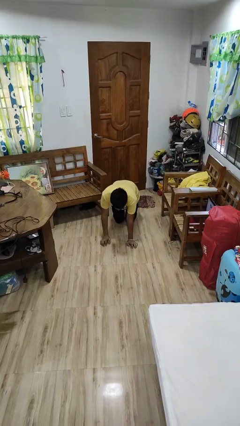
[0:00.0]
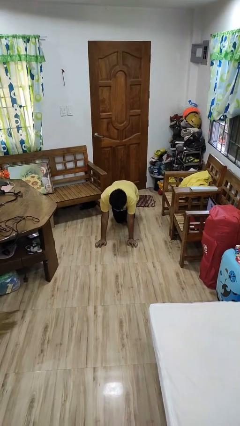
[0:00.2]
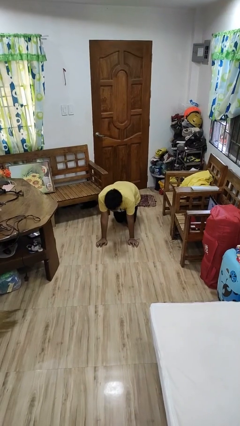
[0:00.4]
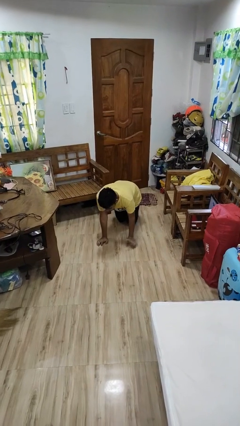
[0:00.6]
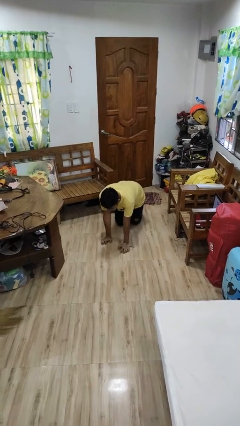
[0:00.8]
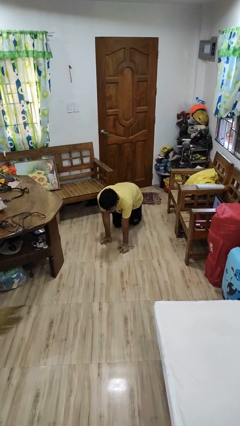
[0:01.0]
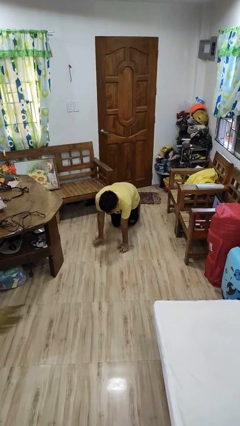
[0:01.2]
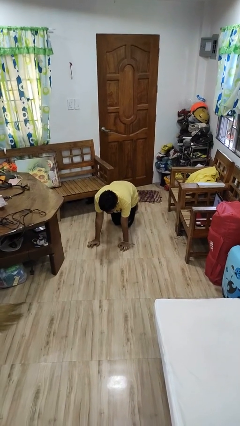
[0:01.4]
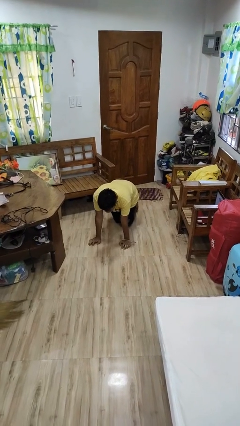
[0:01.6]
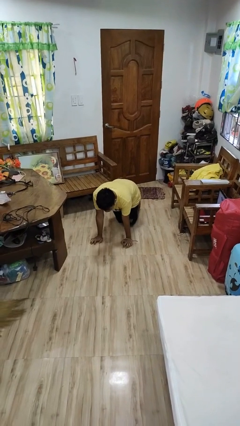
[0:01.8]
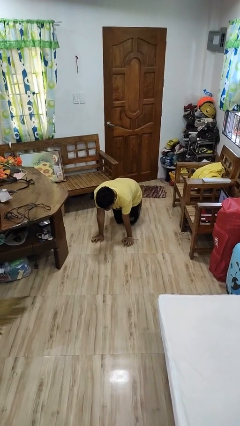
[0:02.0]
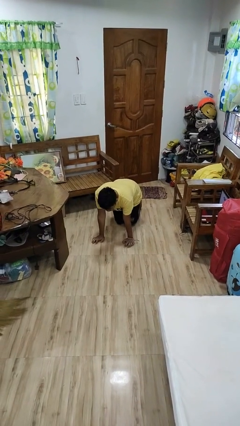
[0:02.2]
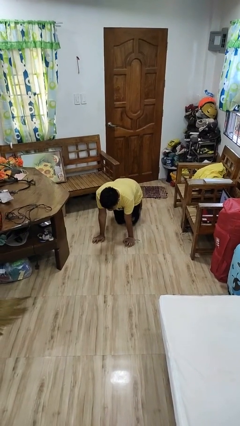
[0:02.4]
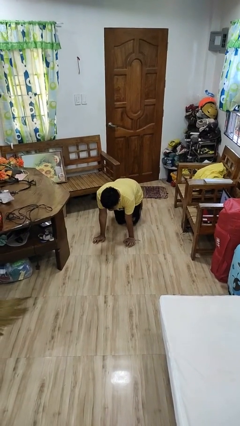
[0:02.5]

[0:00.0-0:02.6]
person crawls

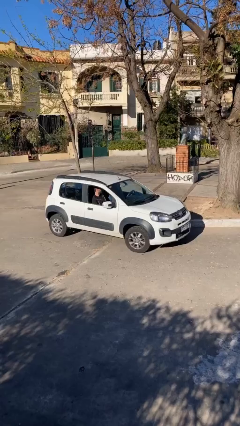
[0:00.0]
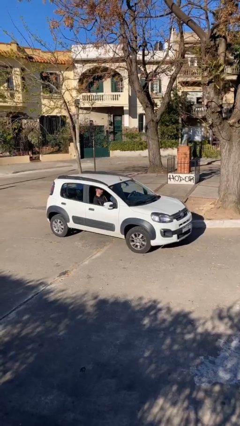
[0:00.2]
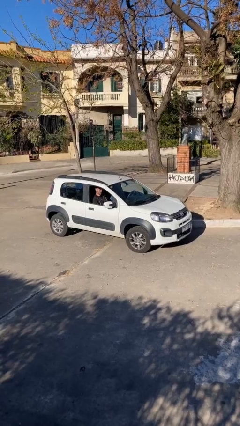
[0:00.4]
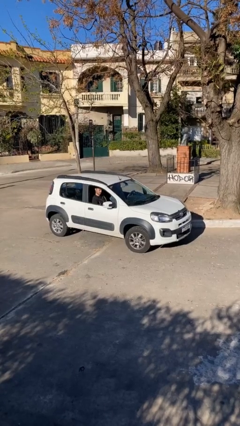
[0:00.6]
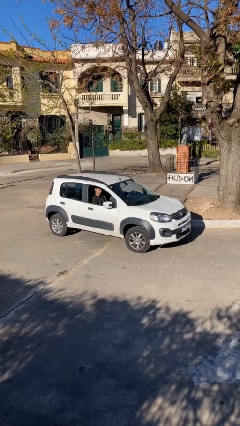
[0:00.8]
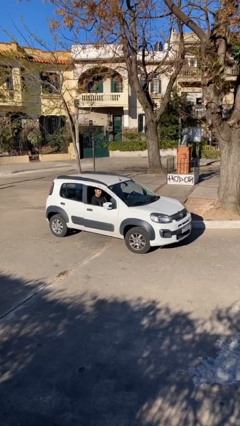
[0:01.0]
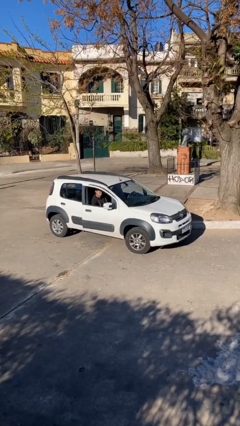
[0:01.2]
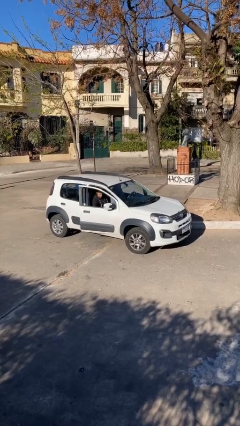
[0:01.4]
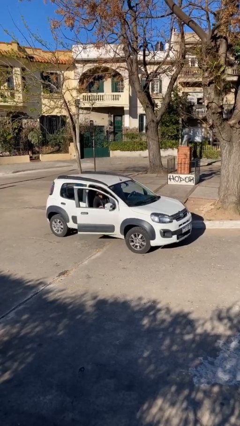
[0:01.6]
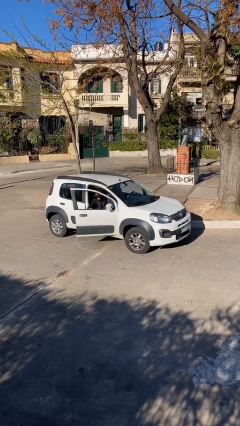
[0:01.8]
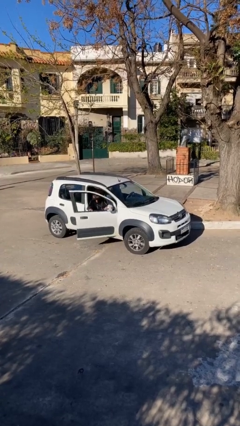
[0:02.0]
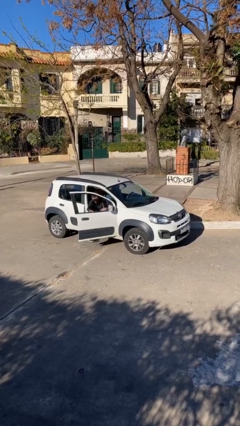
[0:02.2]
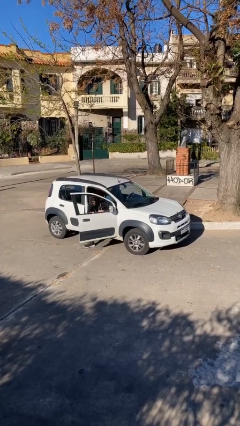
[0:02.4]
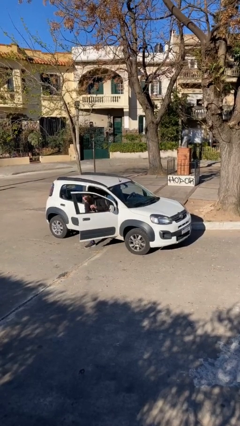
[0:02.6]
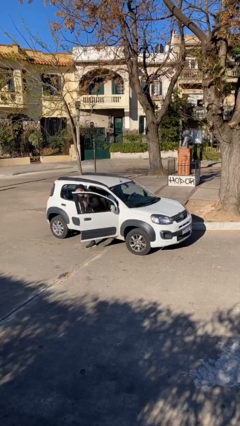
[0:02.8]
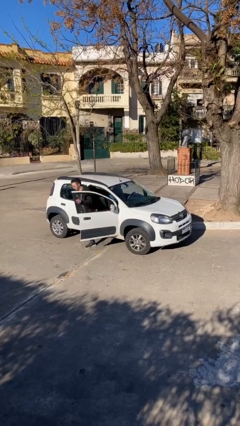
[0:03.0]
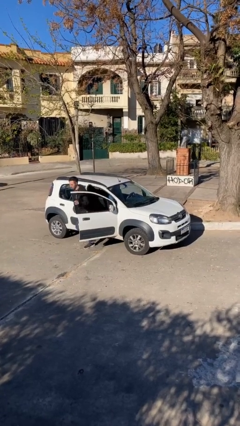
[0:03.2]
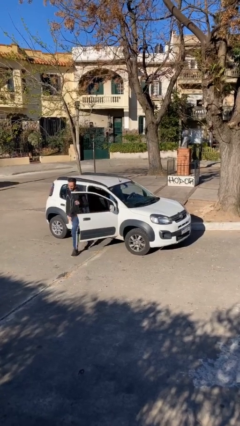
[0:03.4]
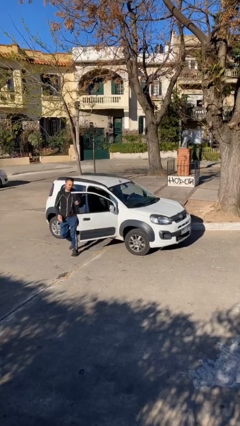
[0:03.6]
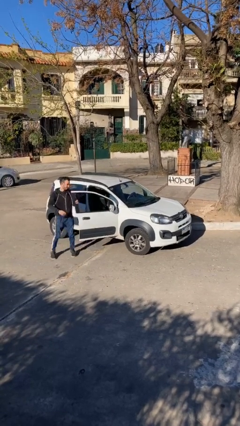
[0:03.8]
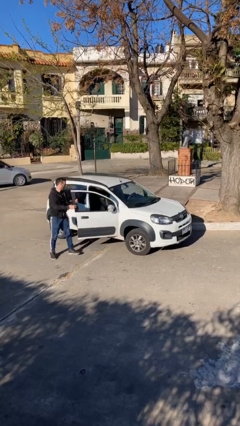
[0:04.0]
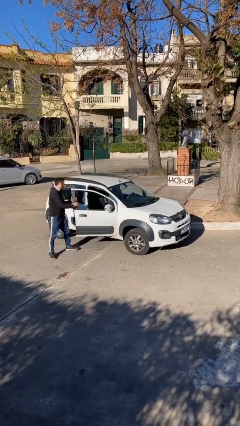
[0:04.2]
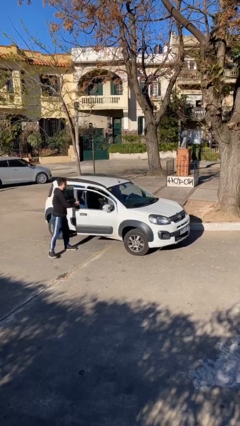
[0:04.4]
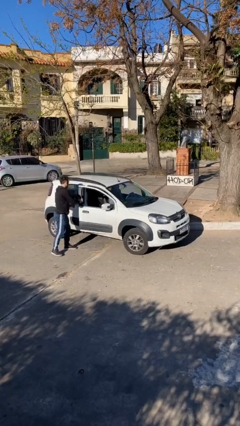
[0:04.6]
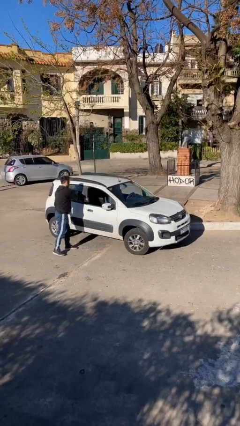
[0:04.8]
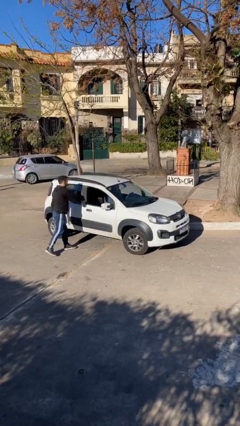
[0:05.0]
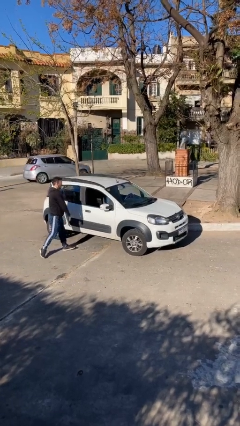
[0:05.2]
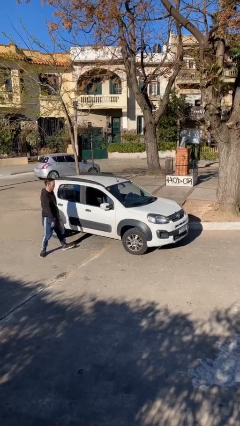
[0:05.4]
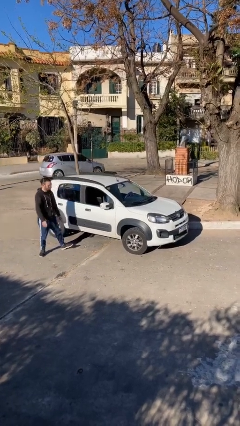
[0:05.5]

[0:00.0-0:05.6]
car drops off person

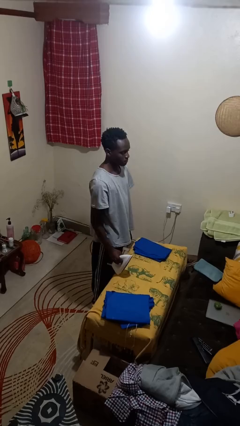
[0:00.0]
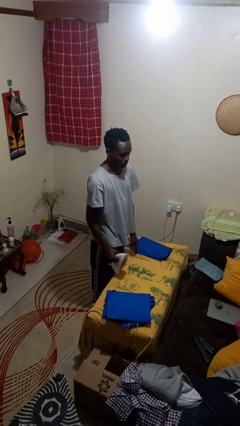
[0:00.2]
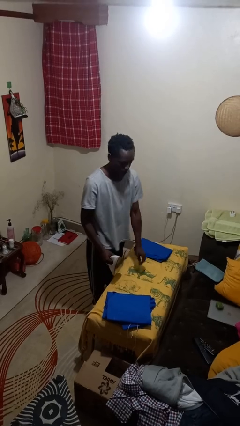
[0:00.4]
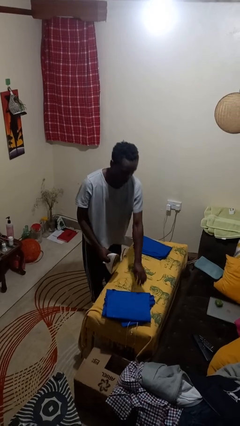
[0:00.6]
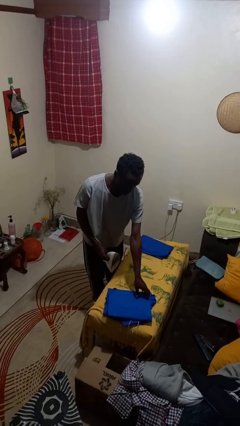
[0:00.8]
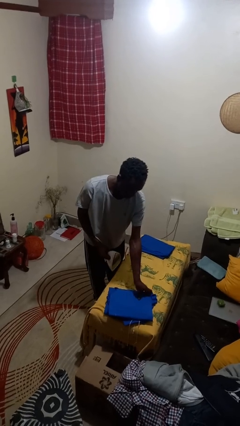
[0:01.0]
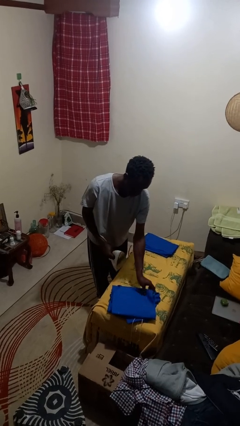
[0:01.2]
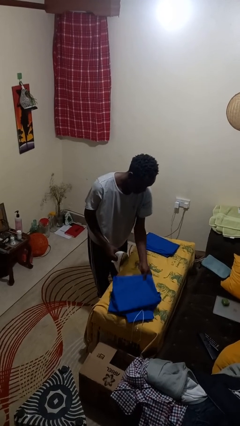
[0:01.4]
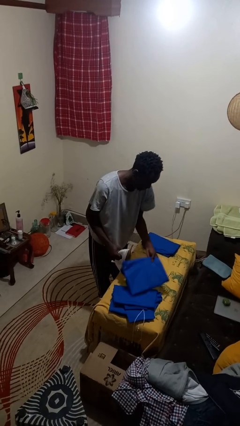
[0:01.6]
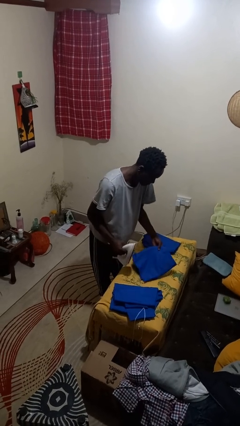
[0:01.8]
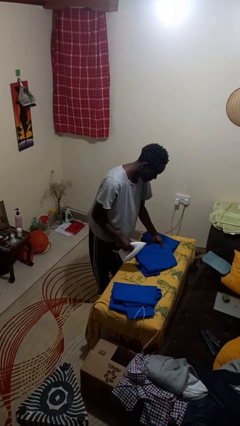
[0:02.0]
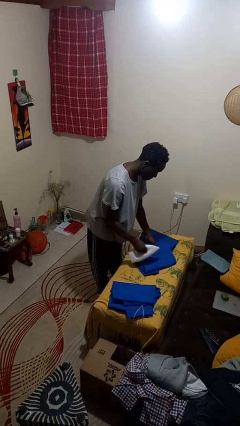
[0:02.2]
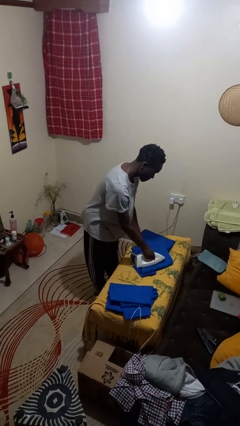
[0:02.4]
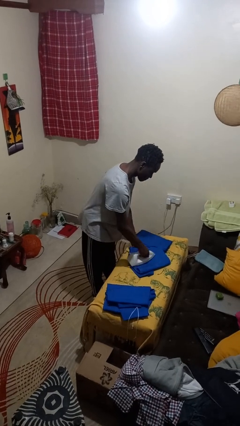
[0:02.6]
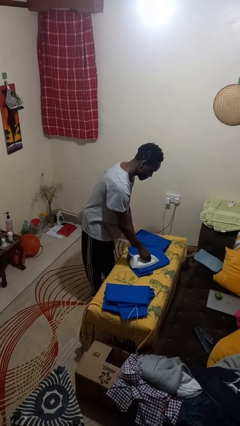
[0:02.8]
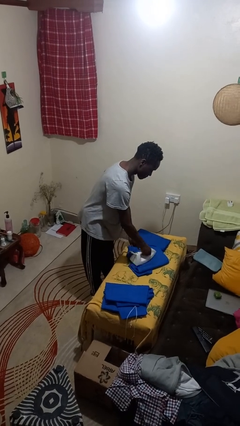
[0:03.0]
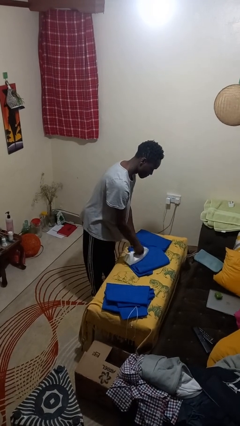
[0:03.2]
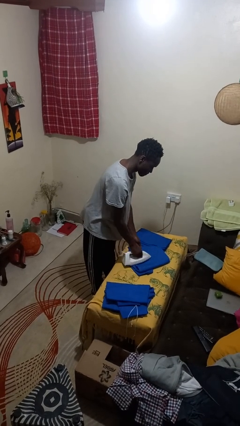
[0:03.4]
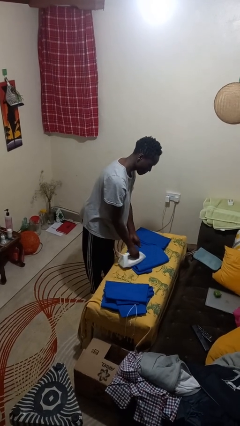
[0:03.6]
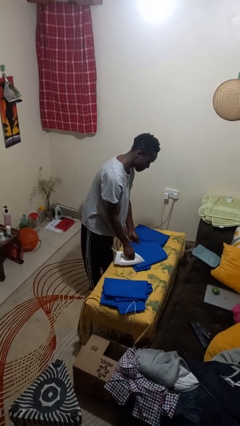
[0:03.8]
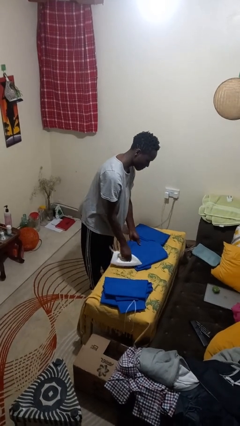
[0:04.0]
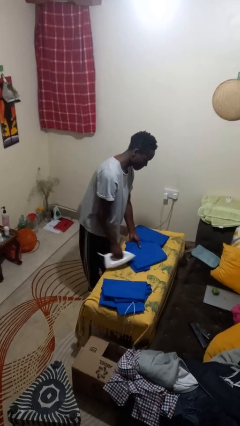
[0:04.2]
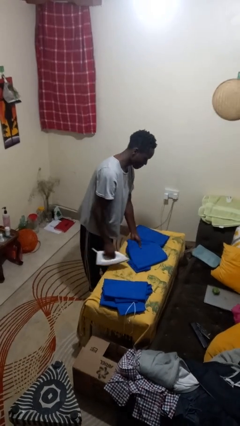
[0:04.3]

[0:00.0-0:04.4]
person irons clothes

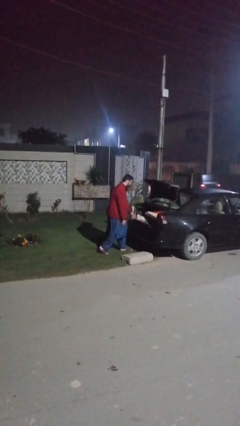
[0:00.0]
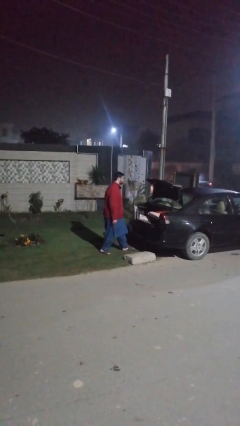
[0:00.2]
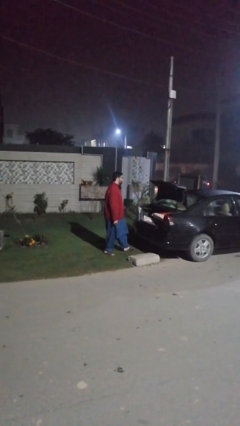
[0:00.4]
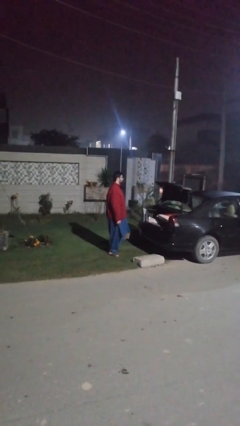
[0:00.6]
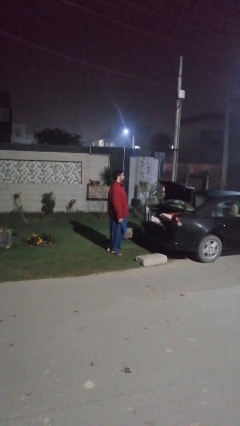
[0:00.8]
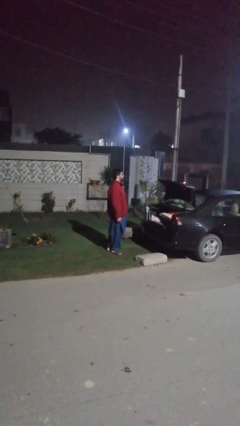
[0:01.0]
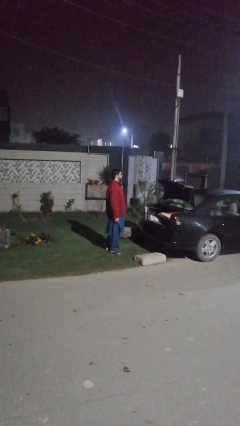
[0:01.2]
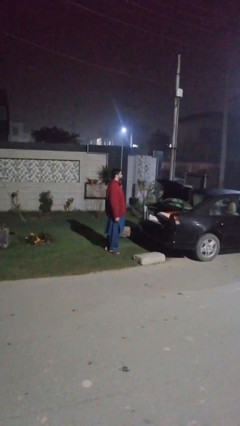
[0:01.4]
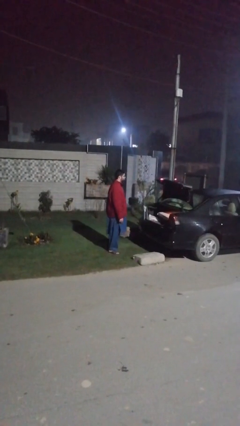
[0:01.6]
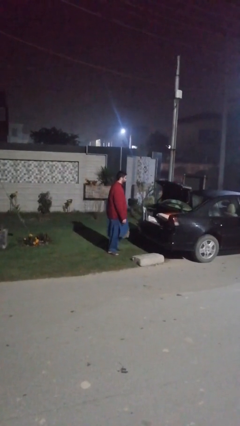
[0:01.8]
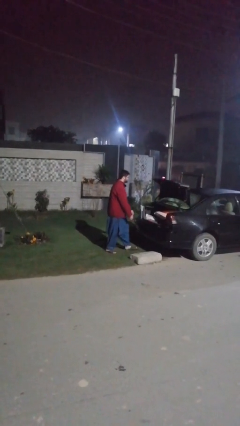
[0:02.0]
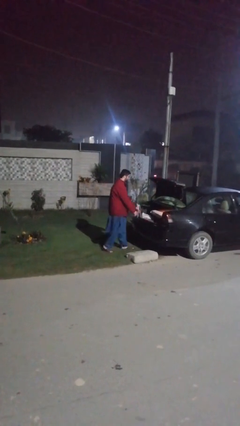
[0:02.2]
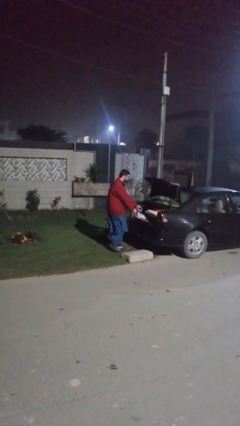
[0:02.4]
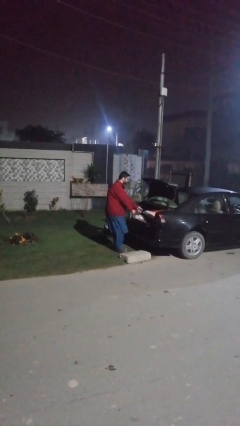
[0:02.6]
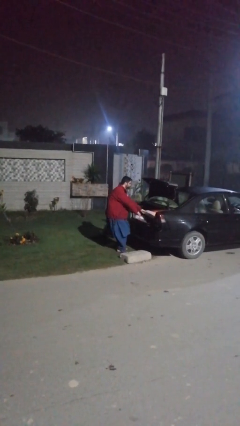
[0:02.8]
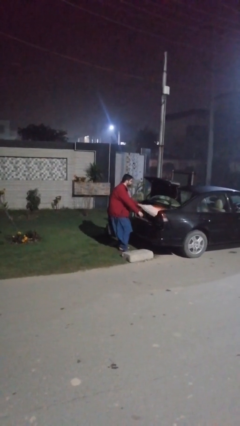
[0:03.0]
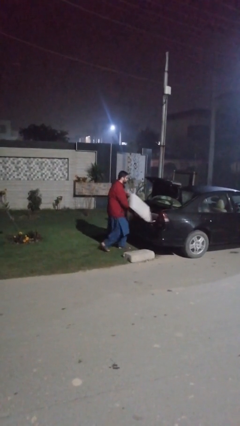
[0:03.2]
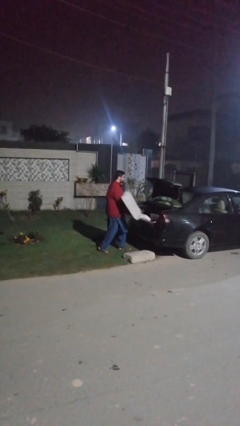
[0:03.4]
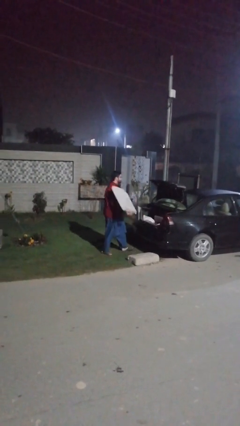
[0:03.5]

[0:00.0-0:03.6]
person loads car

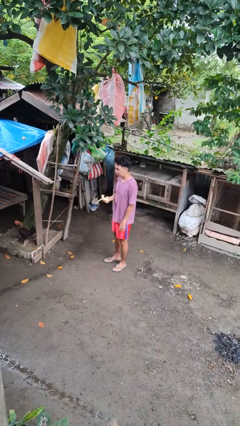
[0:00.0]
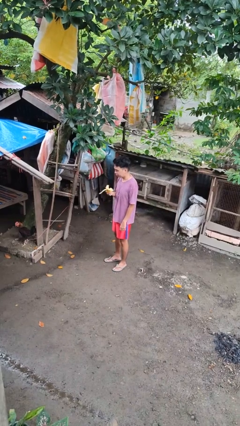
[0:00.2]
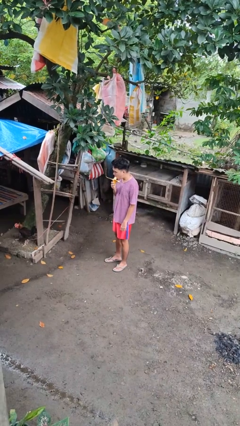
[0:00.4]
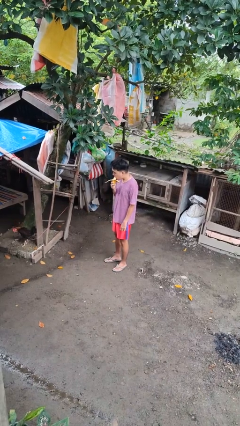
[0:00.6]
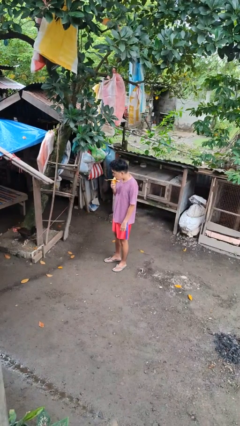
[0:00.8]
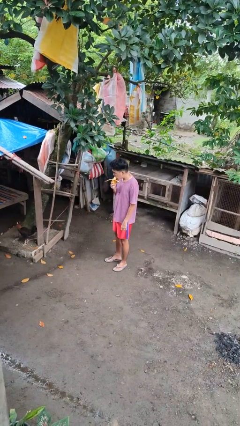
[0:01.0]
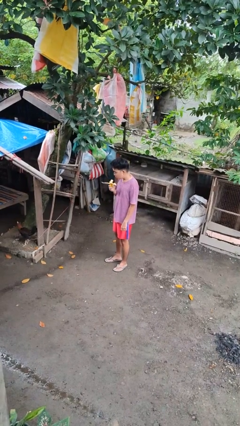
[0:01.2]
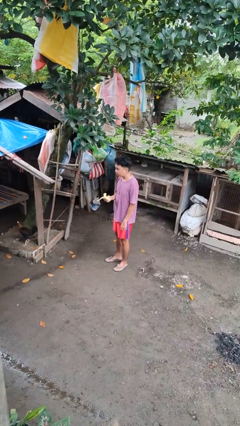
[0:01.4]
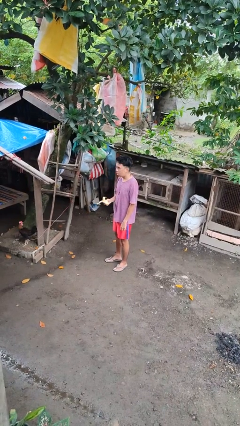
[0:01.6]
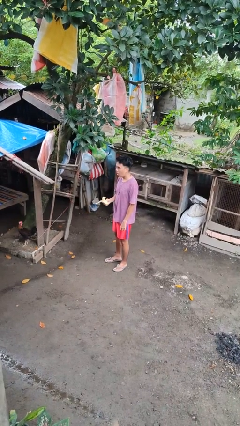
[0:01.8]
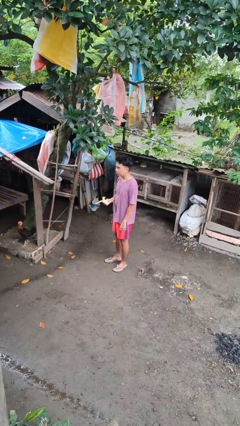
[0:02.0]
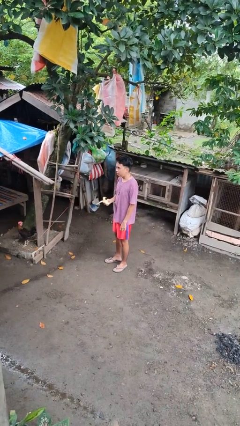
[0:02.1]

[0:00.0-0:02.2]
person eats banana
